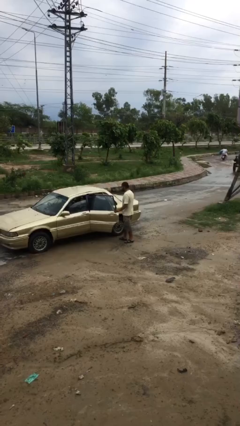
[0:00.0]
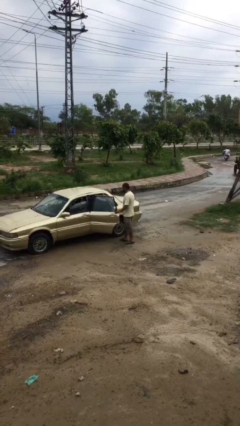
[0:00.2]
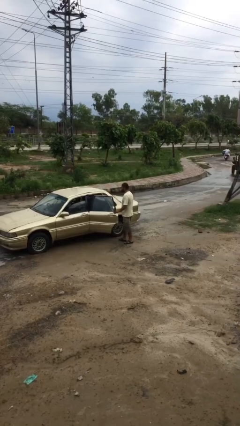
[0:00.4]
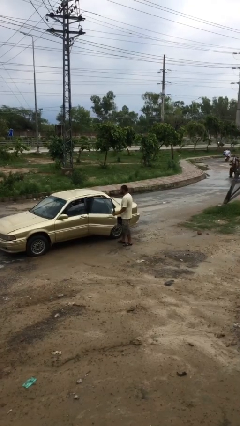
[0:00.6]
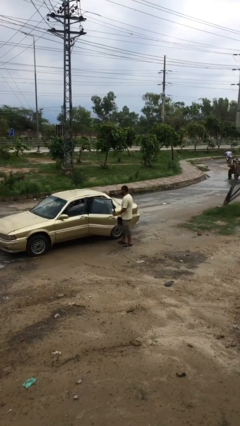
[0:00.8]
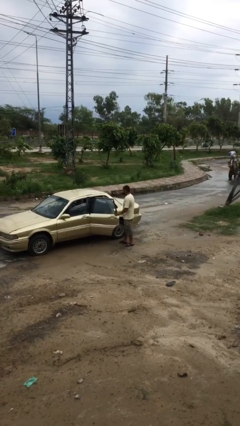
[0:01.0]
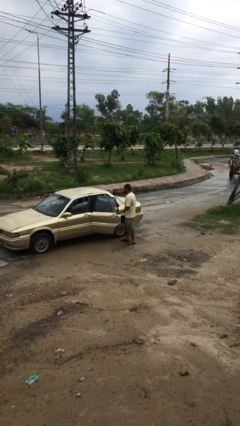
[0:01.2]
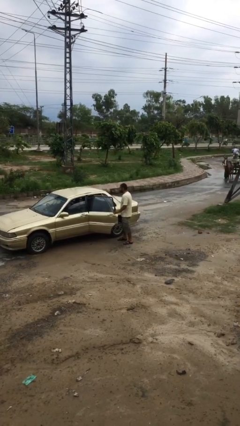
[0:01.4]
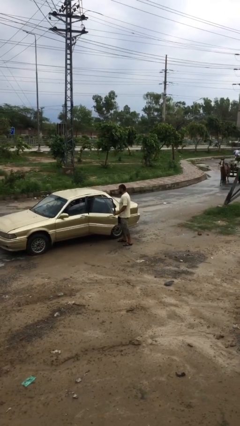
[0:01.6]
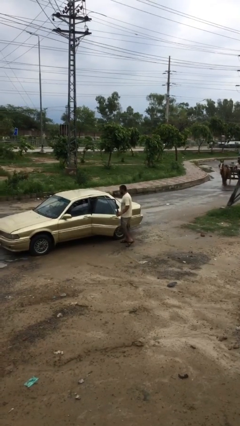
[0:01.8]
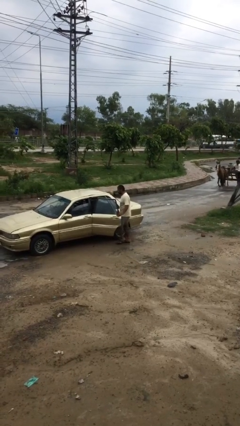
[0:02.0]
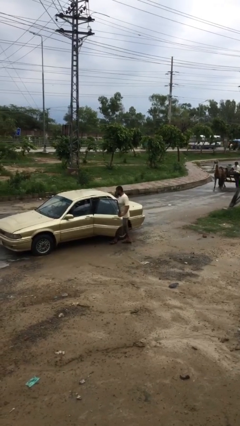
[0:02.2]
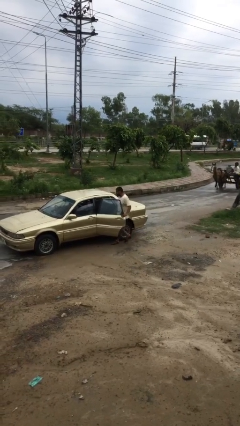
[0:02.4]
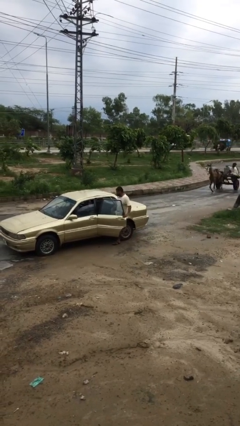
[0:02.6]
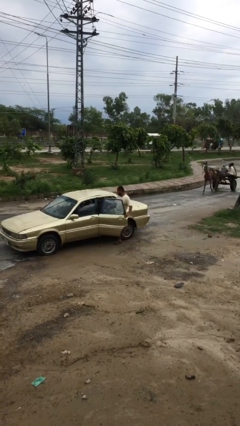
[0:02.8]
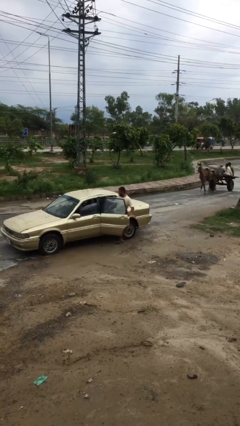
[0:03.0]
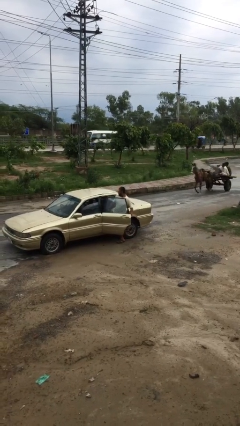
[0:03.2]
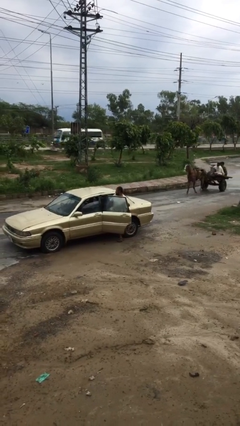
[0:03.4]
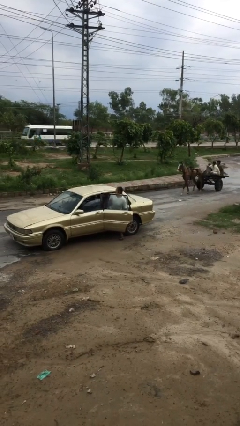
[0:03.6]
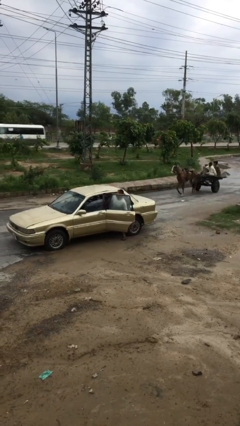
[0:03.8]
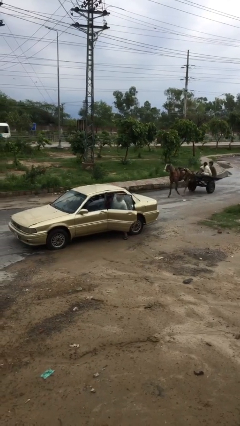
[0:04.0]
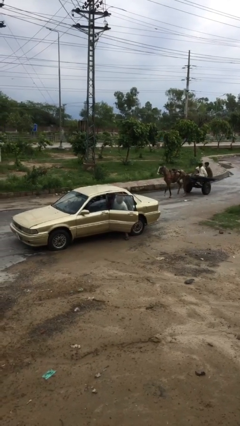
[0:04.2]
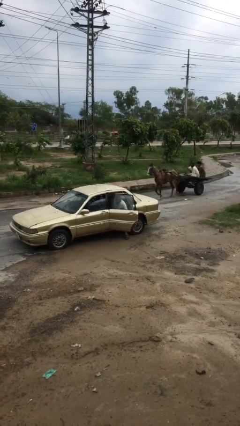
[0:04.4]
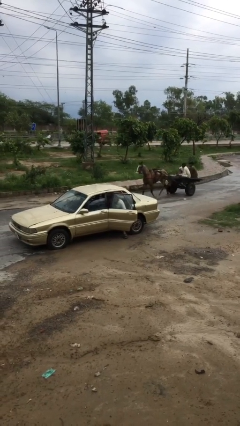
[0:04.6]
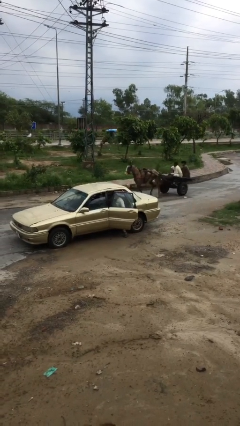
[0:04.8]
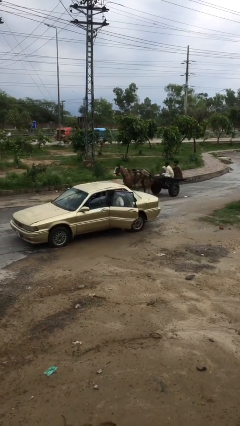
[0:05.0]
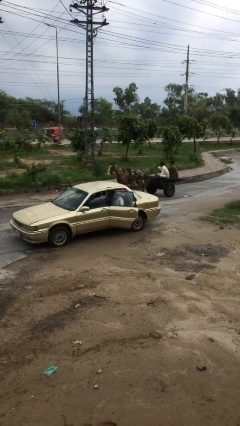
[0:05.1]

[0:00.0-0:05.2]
person enters car

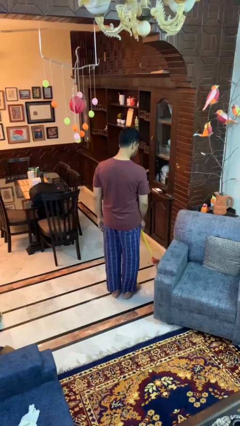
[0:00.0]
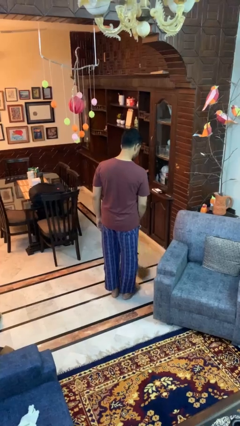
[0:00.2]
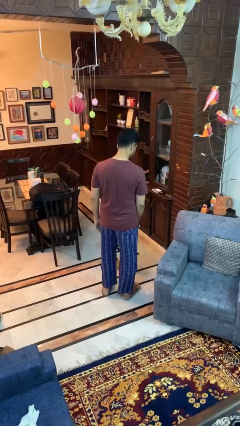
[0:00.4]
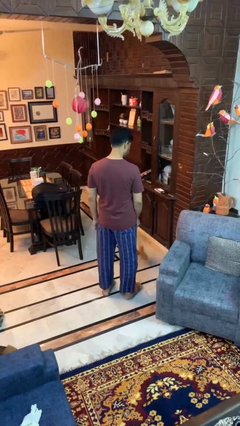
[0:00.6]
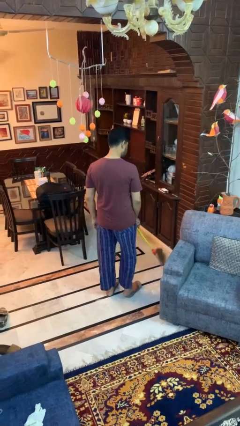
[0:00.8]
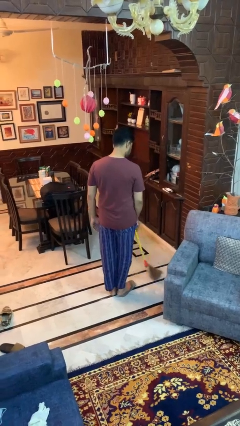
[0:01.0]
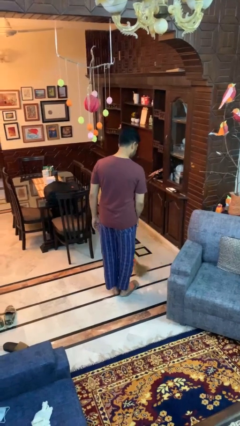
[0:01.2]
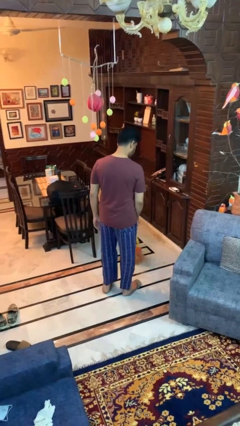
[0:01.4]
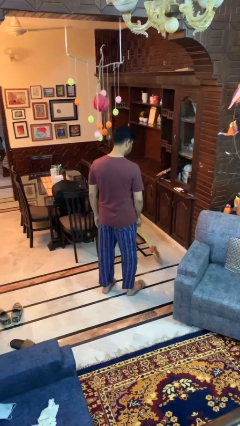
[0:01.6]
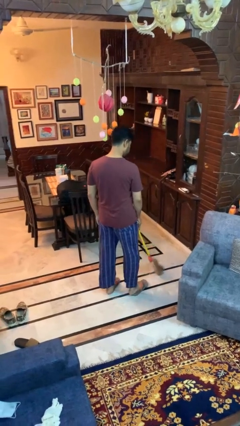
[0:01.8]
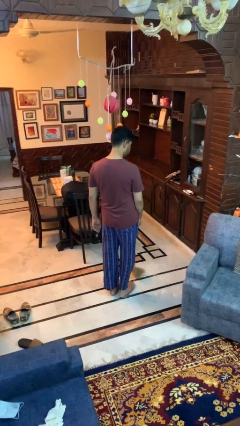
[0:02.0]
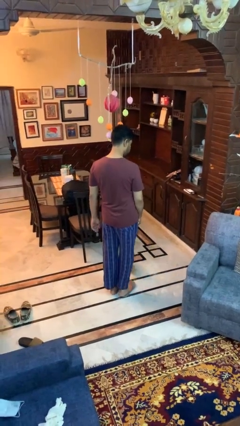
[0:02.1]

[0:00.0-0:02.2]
person sweeps floor

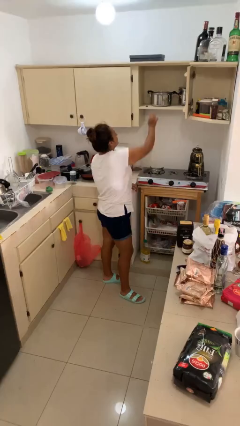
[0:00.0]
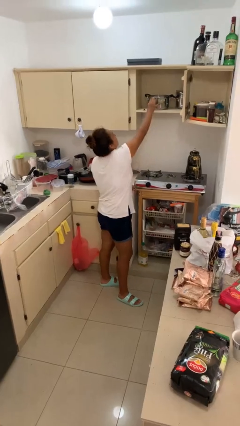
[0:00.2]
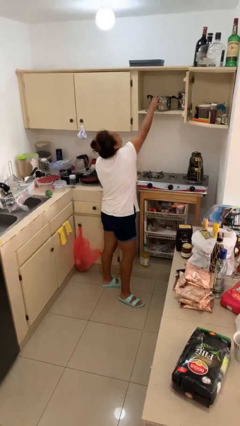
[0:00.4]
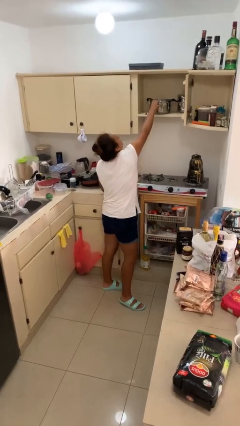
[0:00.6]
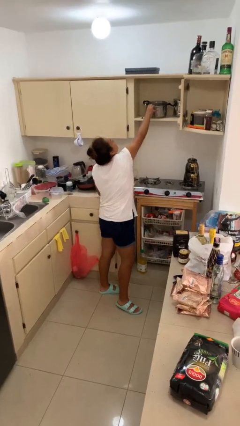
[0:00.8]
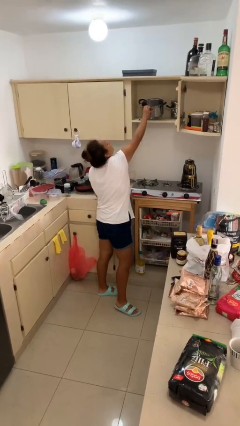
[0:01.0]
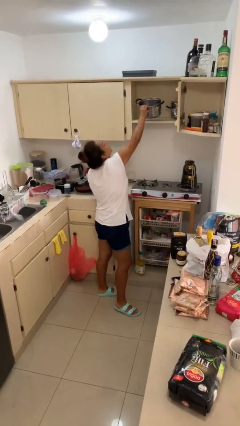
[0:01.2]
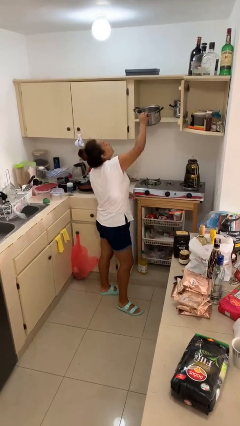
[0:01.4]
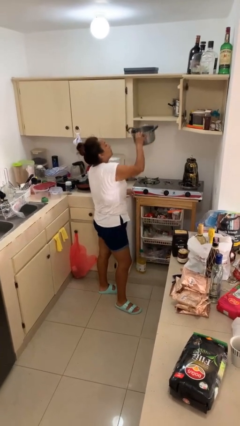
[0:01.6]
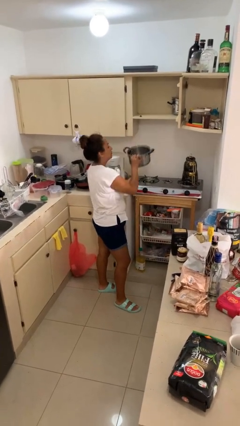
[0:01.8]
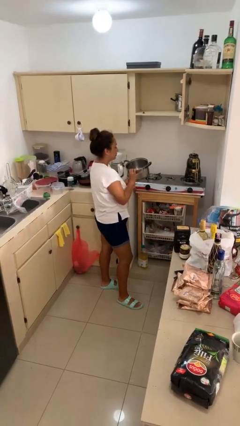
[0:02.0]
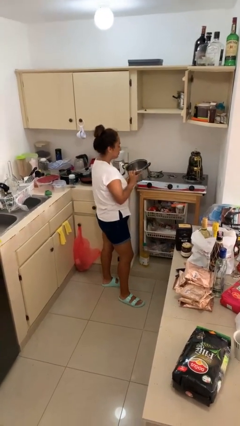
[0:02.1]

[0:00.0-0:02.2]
person picks up object from cabinet

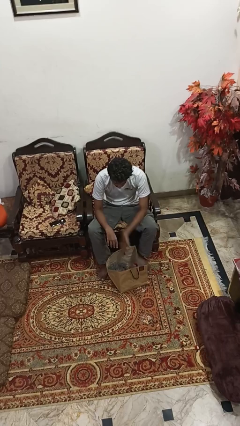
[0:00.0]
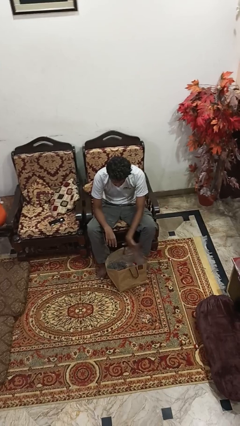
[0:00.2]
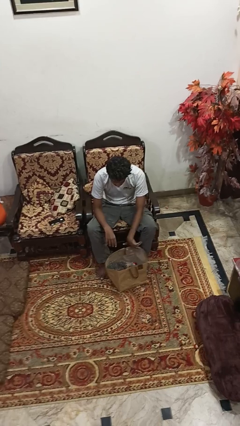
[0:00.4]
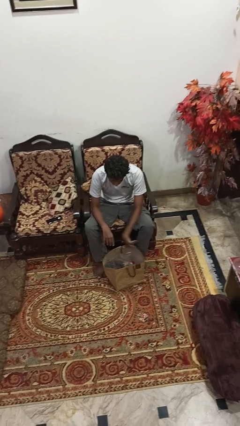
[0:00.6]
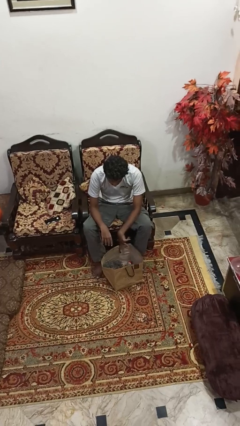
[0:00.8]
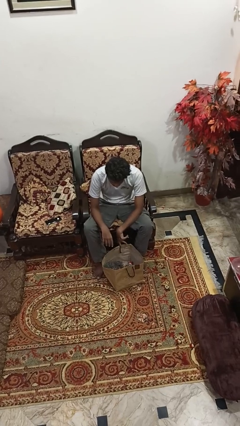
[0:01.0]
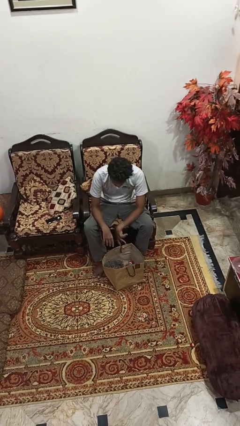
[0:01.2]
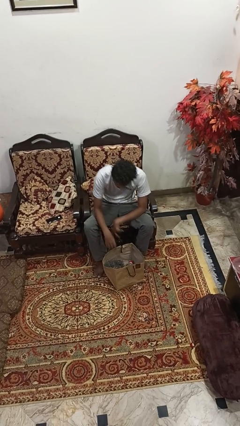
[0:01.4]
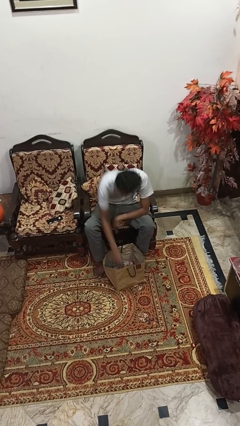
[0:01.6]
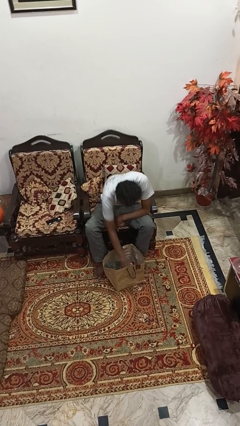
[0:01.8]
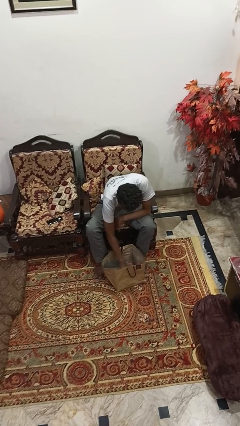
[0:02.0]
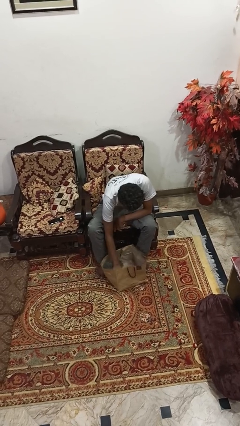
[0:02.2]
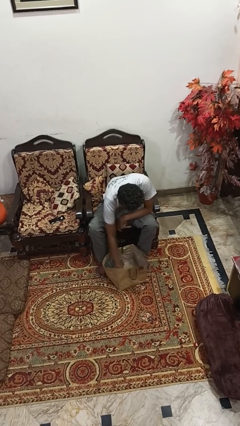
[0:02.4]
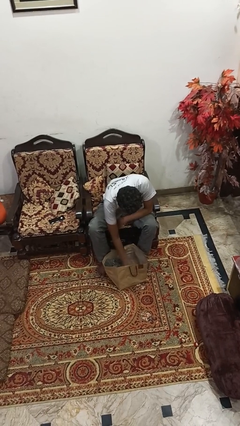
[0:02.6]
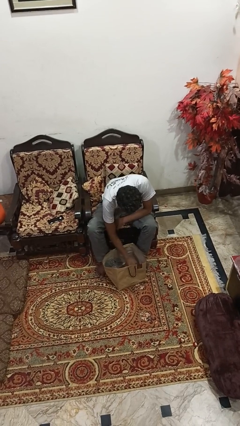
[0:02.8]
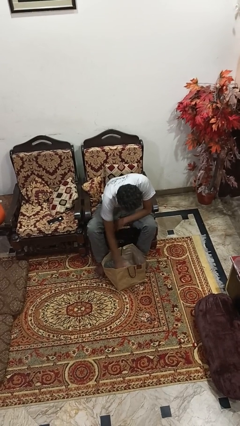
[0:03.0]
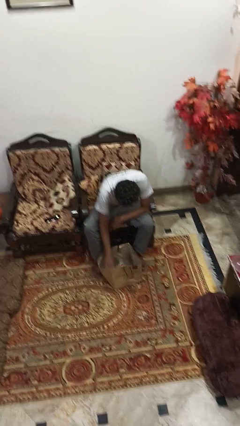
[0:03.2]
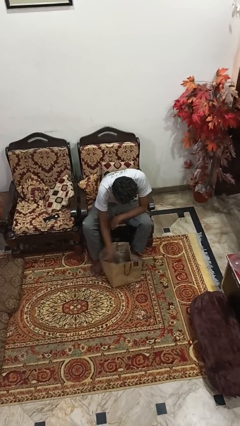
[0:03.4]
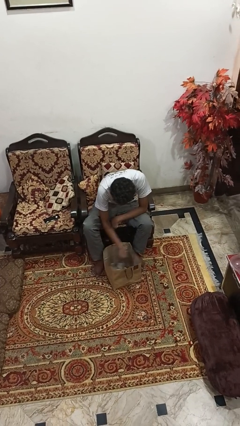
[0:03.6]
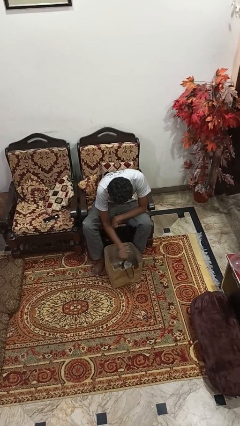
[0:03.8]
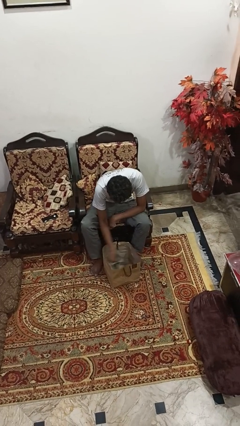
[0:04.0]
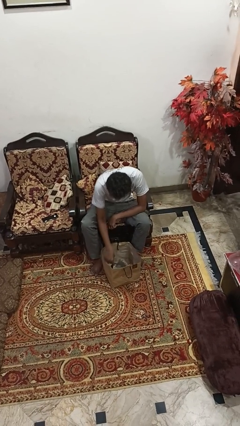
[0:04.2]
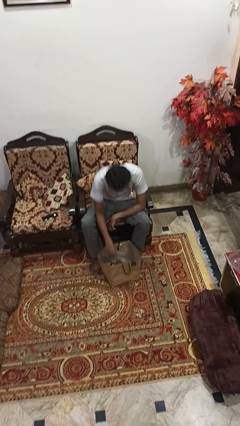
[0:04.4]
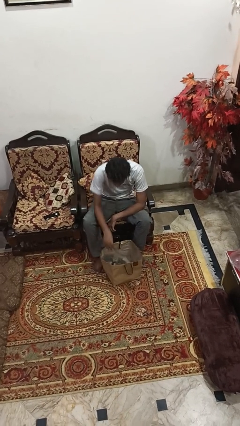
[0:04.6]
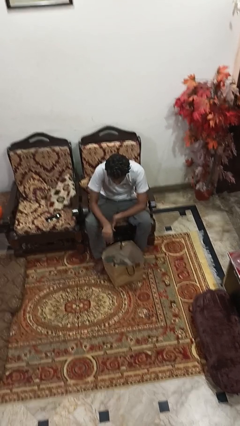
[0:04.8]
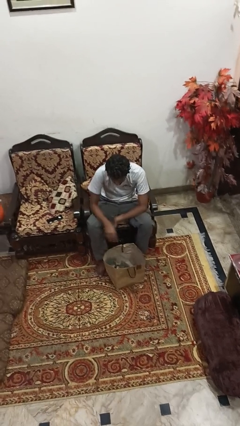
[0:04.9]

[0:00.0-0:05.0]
person searches in bag

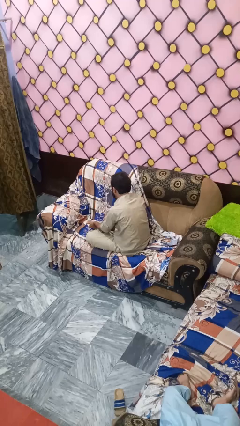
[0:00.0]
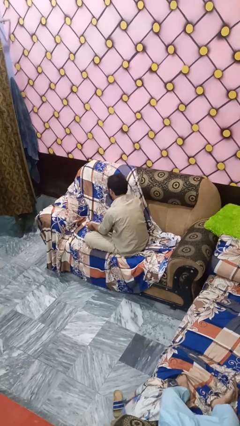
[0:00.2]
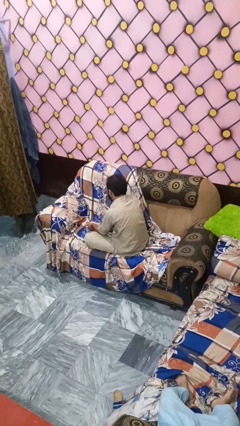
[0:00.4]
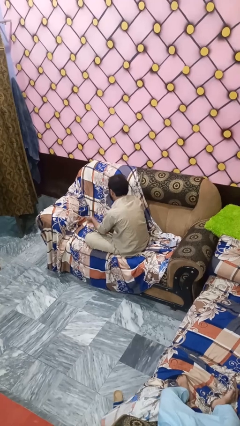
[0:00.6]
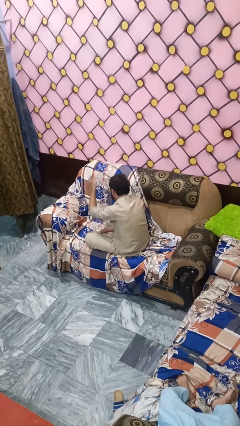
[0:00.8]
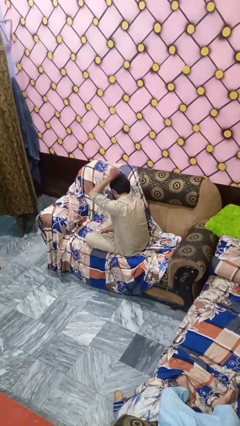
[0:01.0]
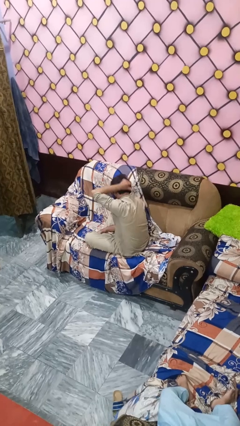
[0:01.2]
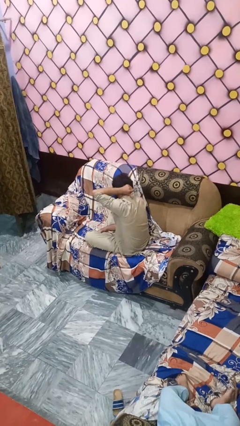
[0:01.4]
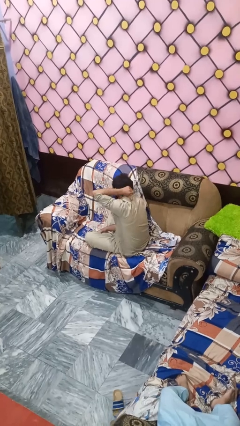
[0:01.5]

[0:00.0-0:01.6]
person gestures behind me

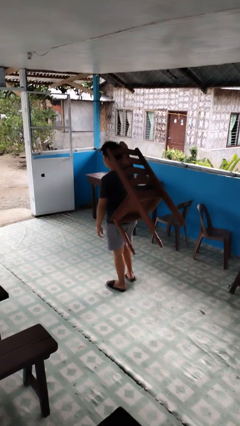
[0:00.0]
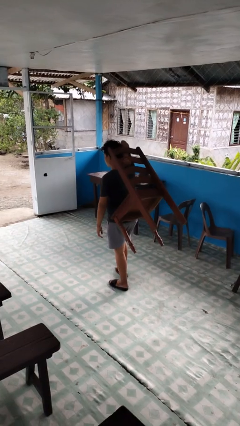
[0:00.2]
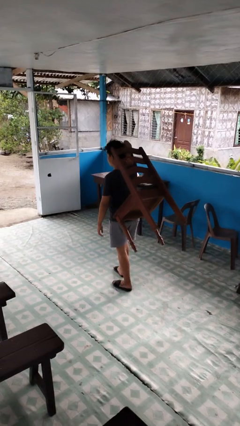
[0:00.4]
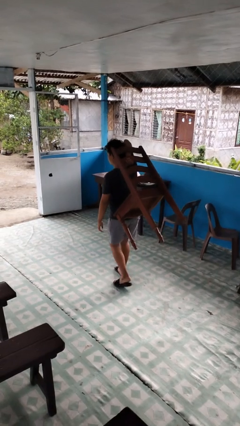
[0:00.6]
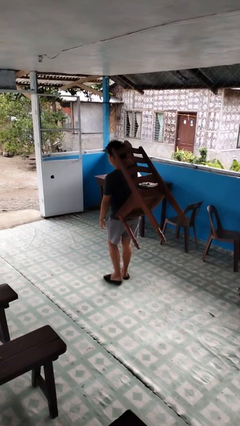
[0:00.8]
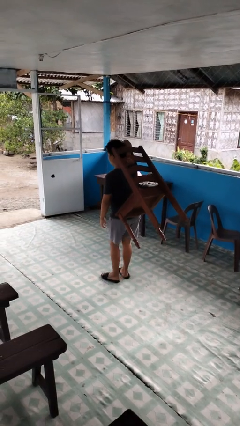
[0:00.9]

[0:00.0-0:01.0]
person carries furniture

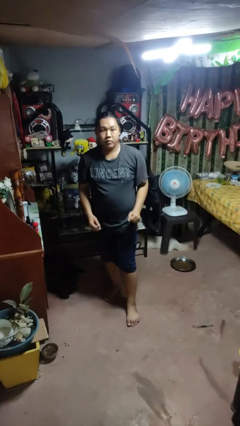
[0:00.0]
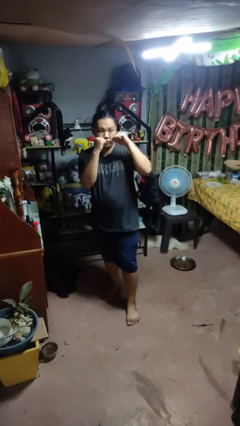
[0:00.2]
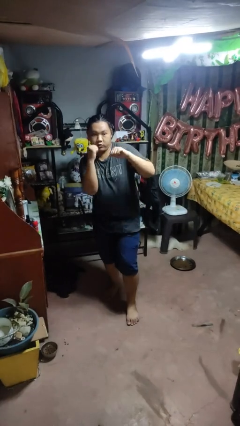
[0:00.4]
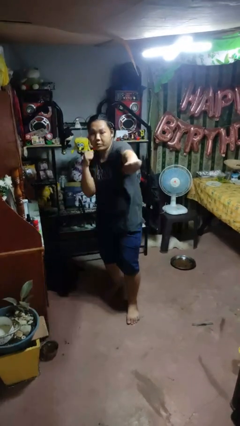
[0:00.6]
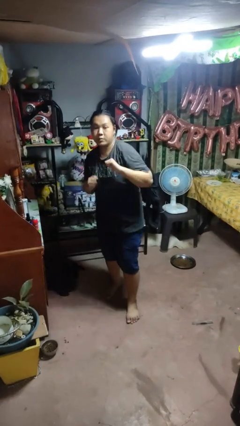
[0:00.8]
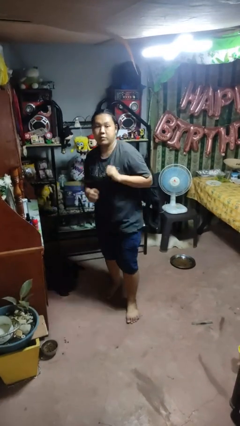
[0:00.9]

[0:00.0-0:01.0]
person punches
